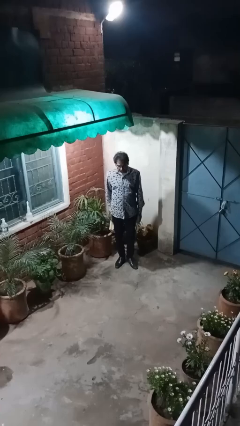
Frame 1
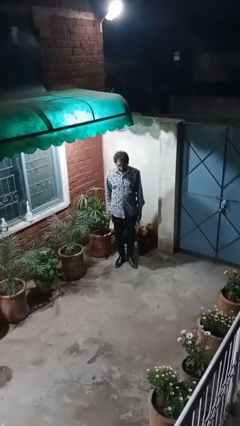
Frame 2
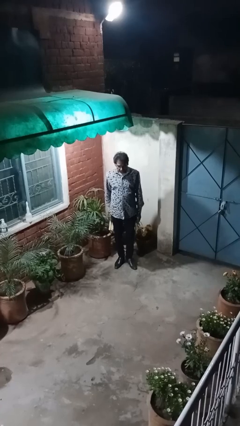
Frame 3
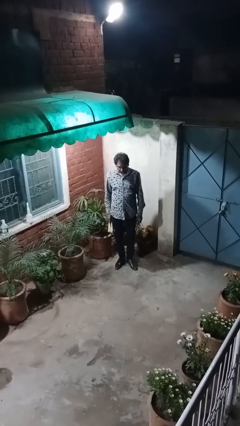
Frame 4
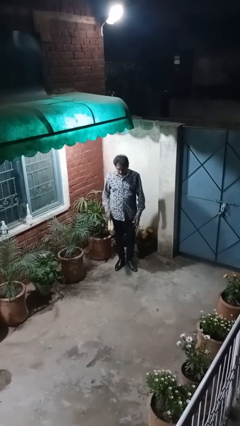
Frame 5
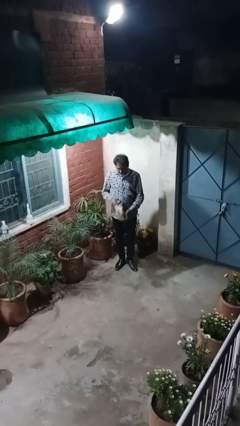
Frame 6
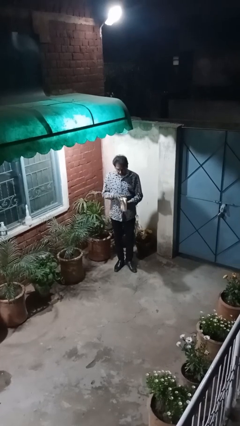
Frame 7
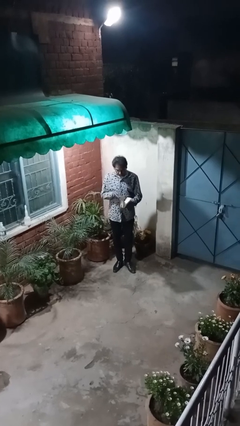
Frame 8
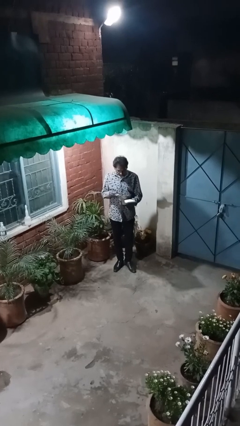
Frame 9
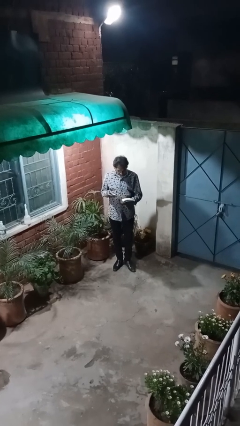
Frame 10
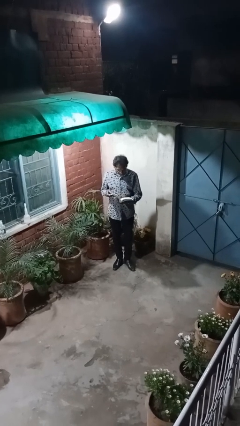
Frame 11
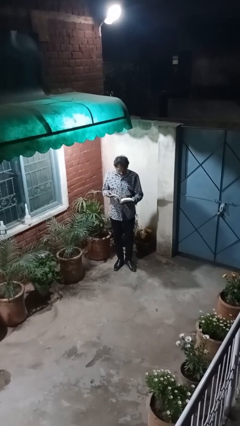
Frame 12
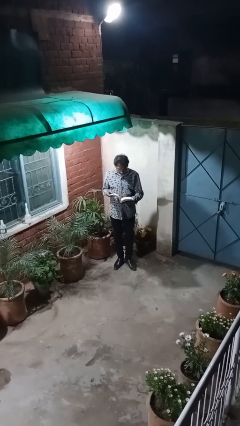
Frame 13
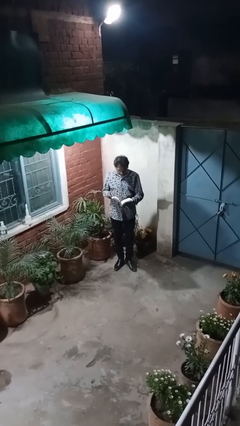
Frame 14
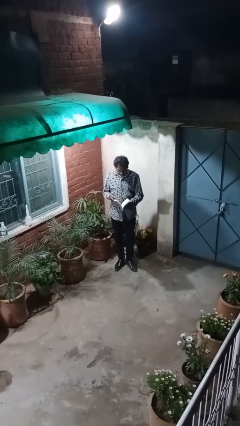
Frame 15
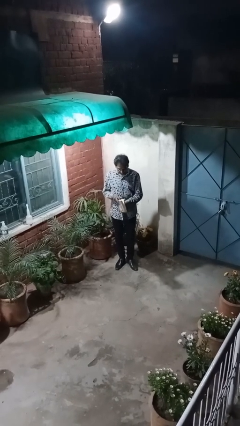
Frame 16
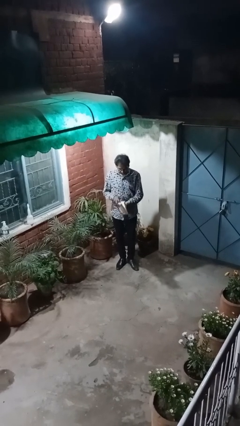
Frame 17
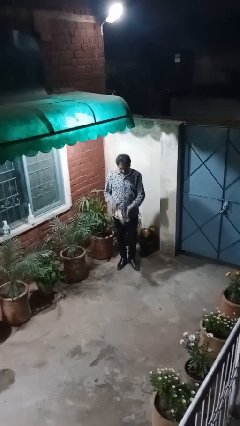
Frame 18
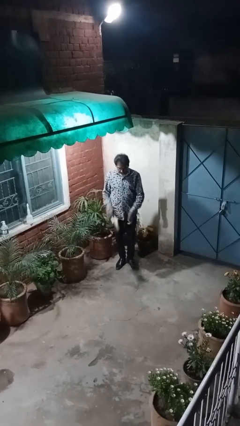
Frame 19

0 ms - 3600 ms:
person reads document

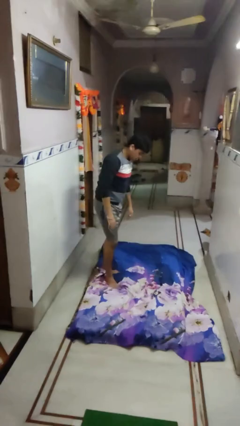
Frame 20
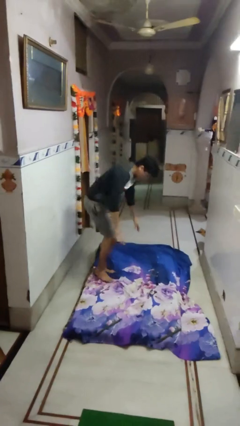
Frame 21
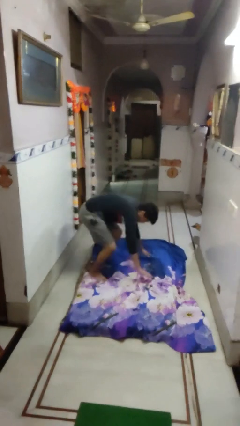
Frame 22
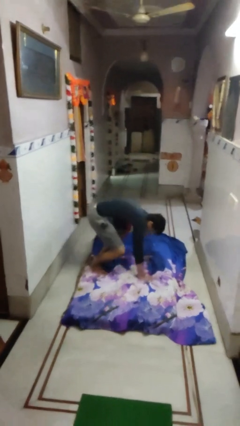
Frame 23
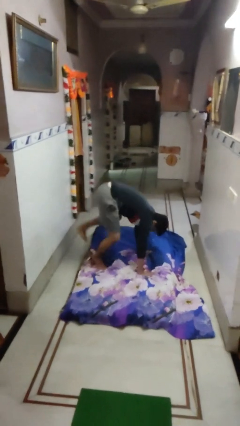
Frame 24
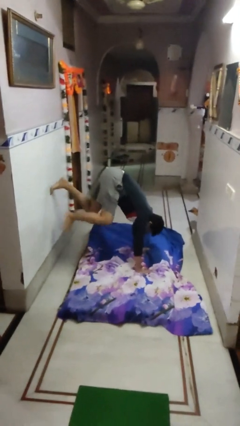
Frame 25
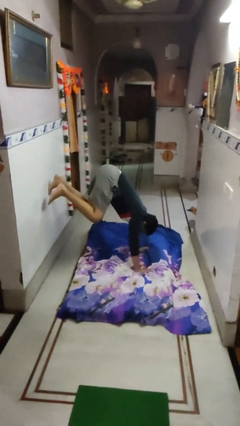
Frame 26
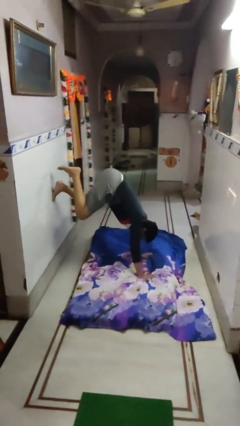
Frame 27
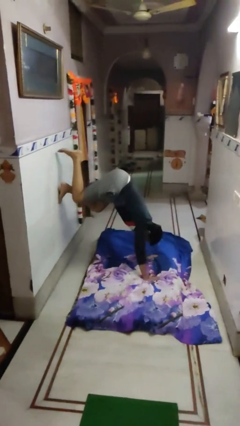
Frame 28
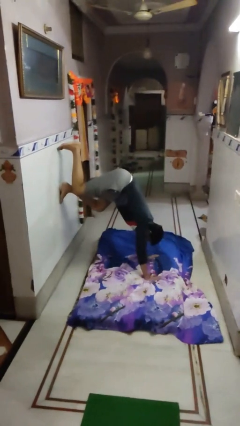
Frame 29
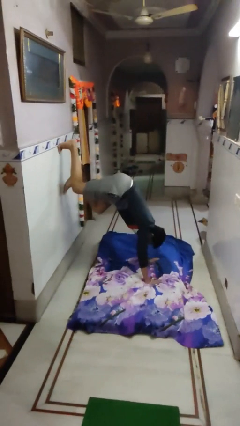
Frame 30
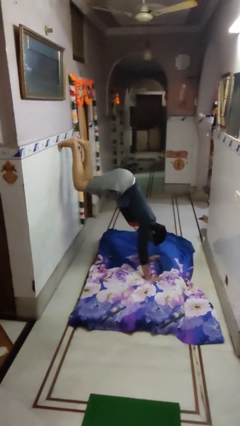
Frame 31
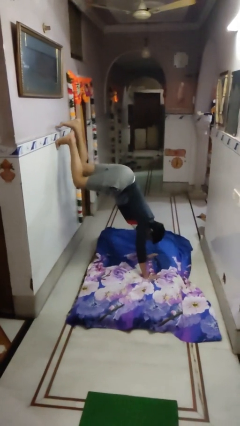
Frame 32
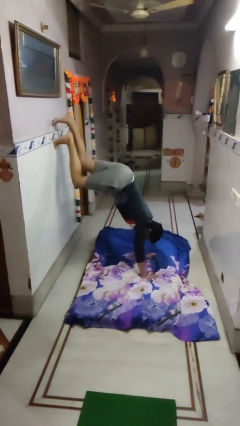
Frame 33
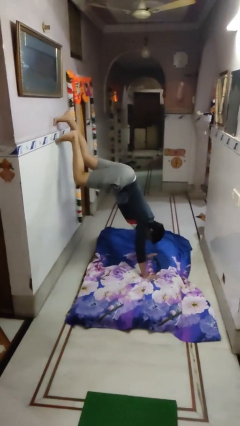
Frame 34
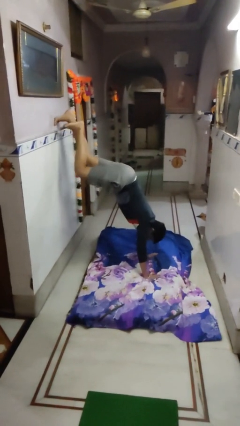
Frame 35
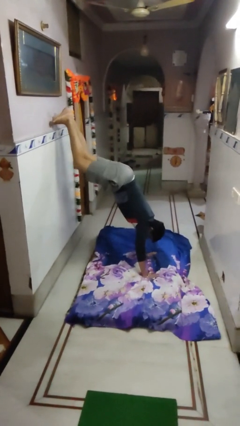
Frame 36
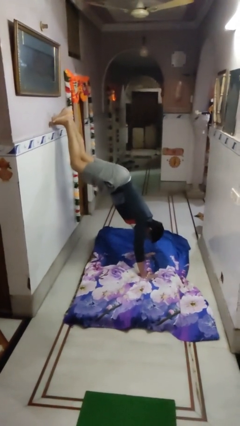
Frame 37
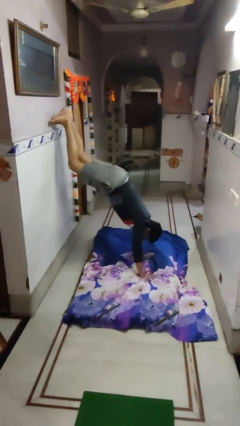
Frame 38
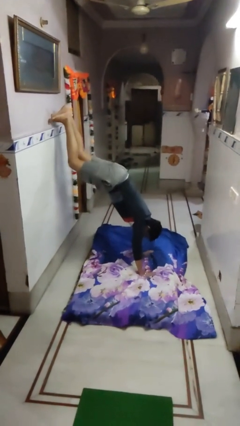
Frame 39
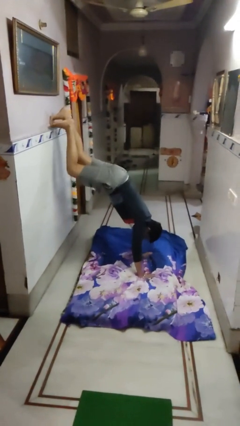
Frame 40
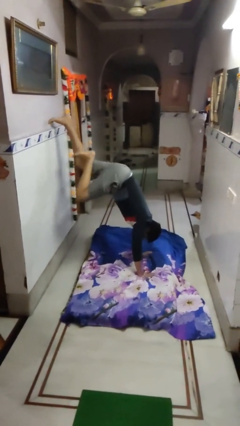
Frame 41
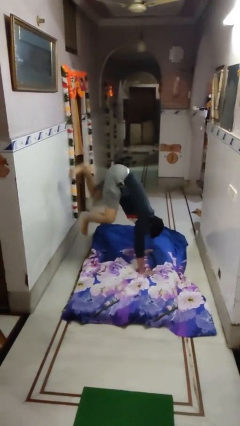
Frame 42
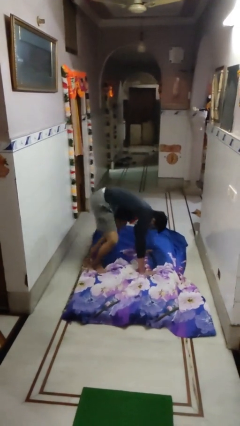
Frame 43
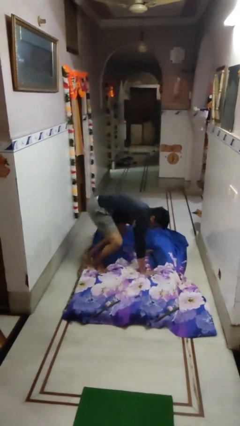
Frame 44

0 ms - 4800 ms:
person handstand

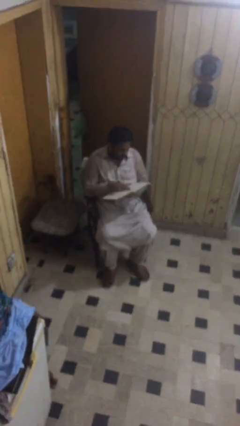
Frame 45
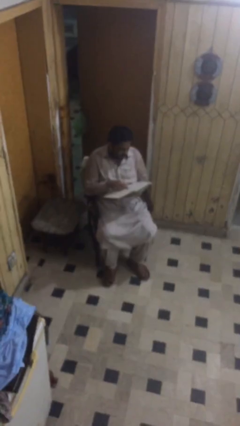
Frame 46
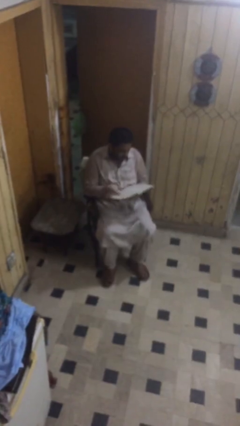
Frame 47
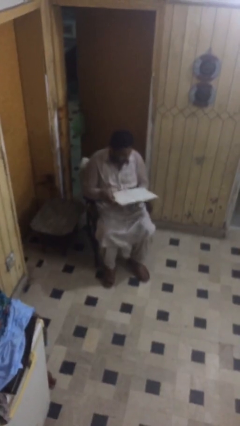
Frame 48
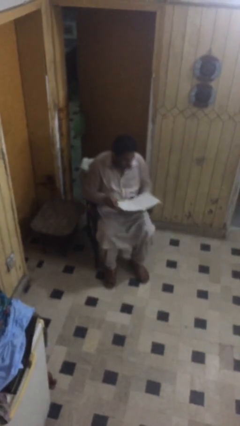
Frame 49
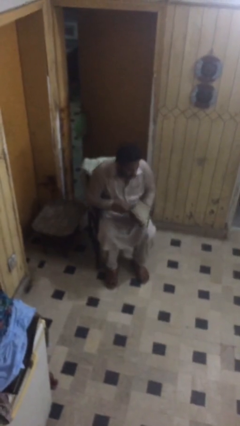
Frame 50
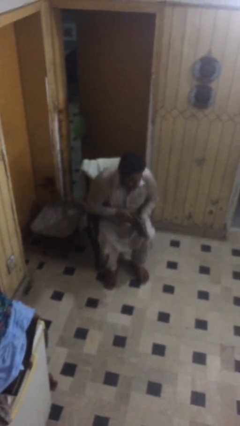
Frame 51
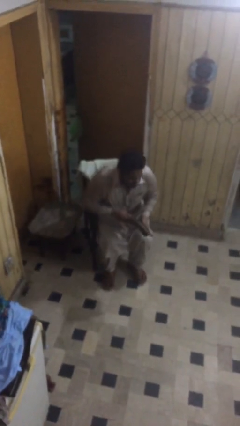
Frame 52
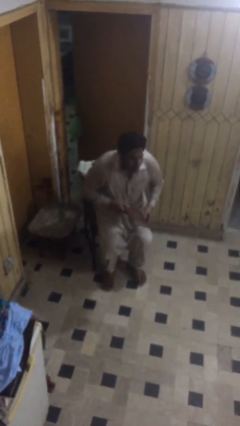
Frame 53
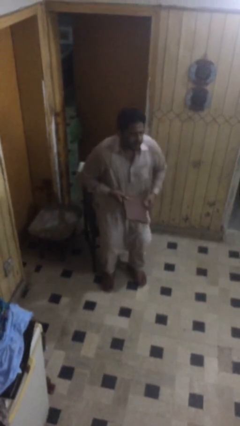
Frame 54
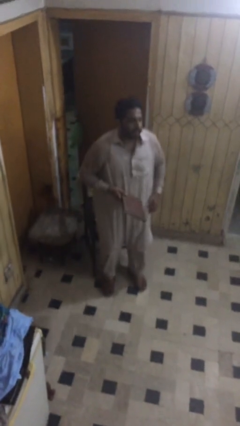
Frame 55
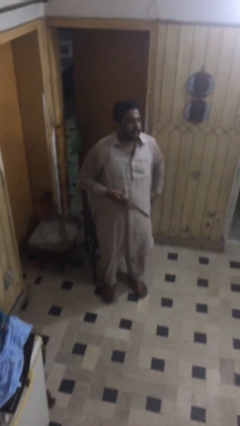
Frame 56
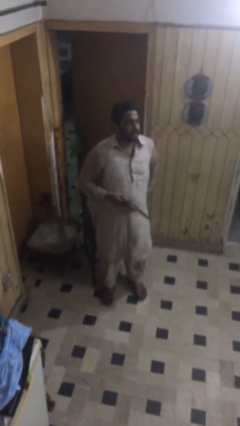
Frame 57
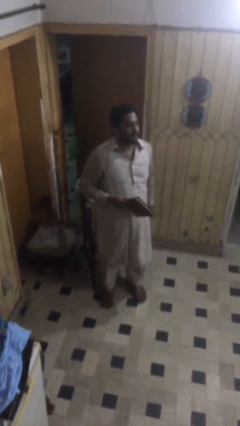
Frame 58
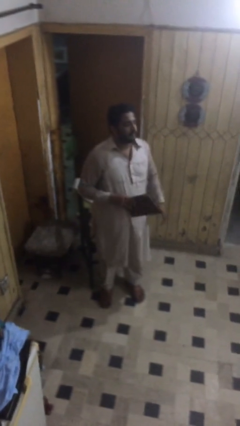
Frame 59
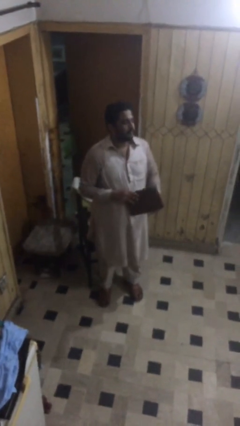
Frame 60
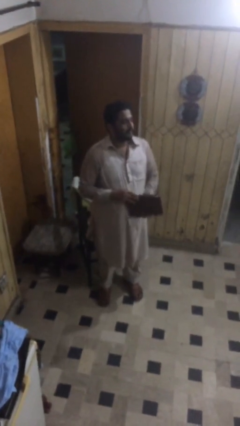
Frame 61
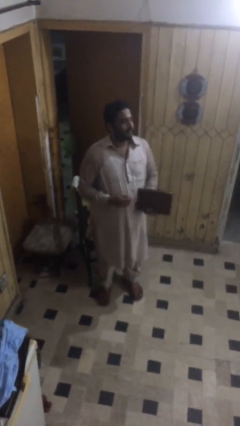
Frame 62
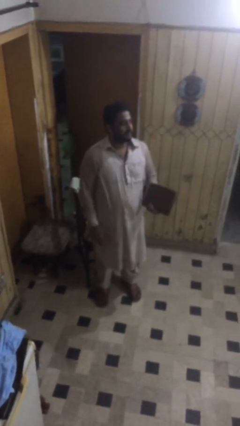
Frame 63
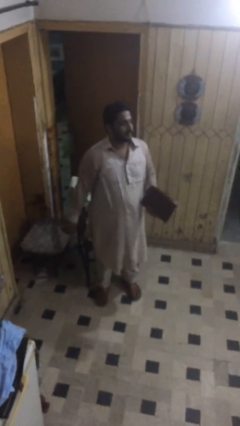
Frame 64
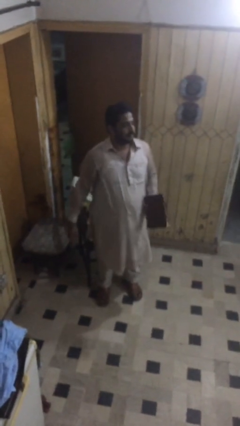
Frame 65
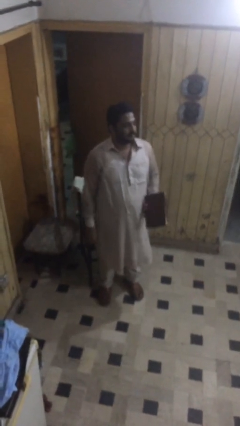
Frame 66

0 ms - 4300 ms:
person stands up

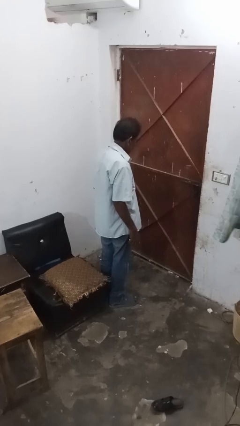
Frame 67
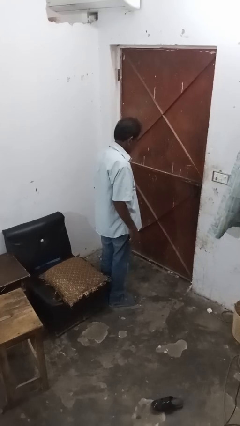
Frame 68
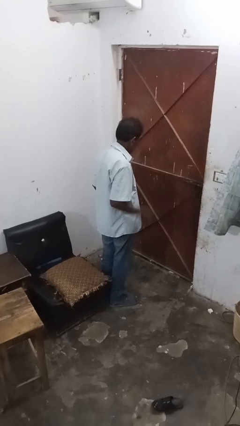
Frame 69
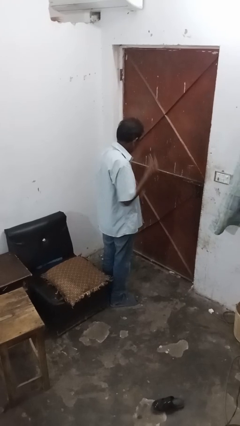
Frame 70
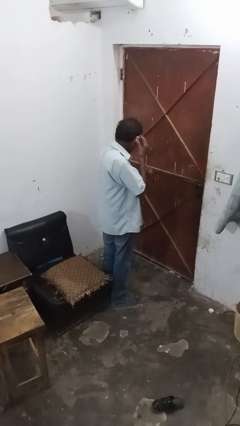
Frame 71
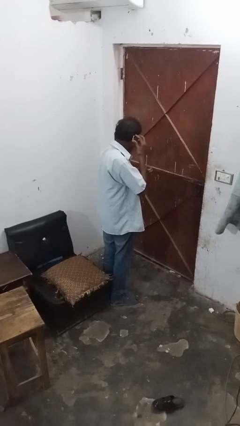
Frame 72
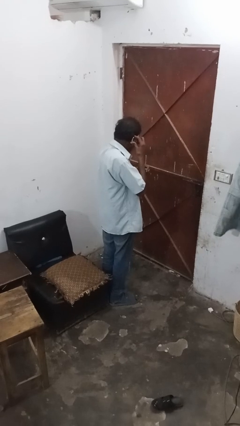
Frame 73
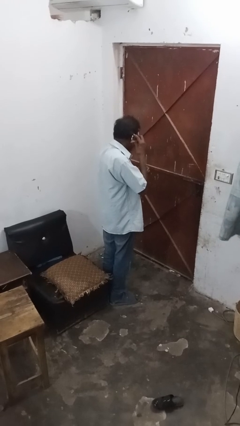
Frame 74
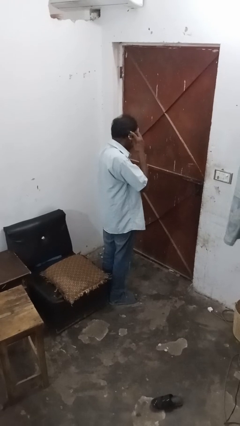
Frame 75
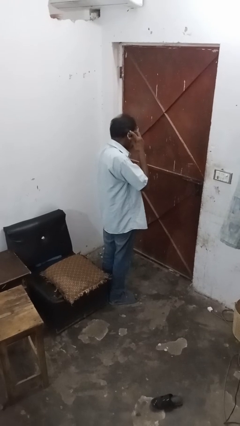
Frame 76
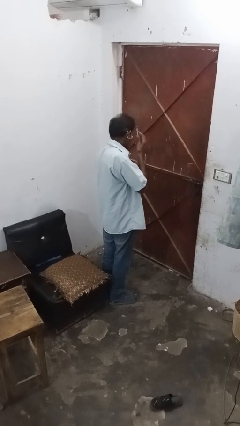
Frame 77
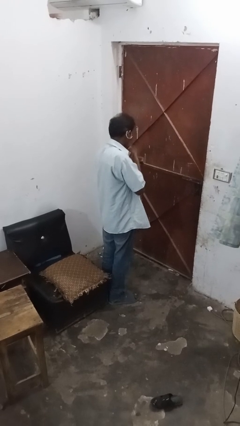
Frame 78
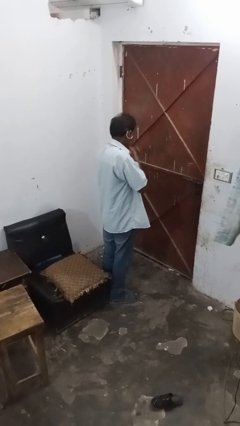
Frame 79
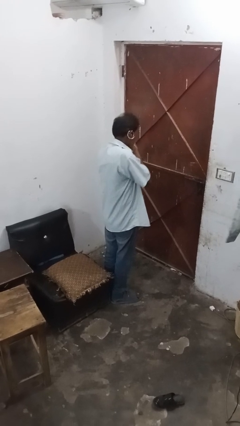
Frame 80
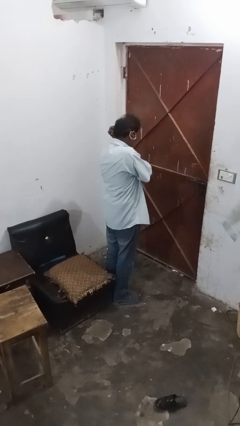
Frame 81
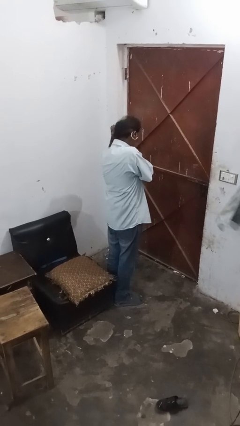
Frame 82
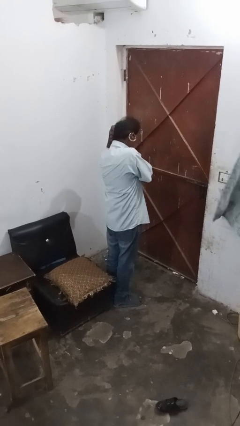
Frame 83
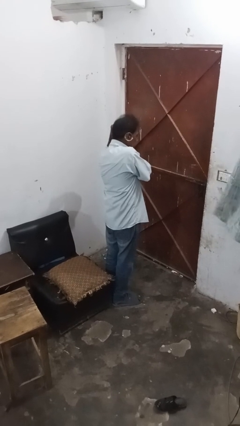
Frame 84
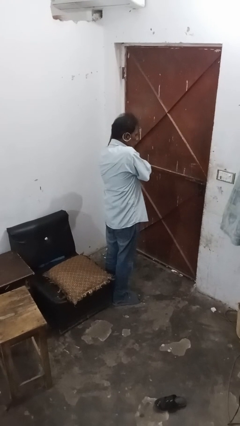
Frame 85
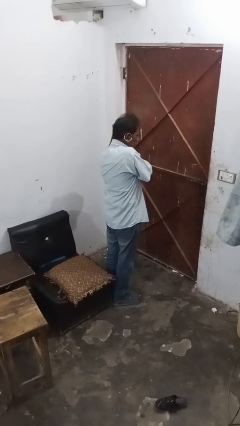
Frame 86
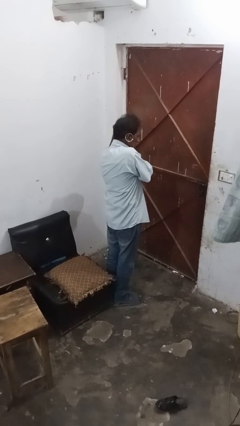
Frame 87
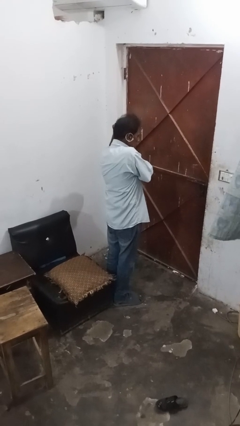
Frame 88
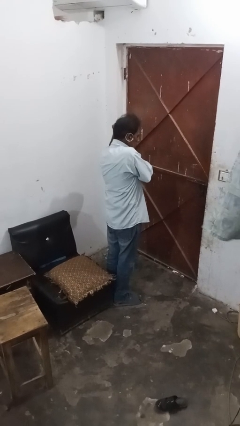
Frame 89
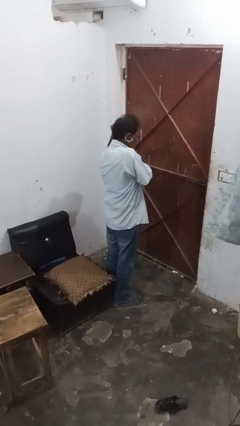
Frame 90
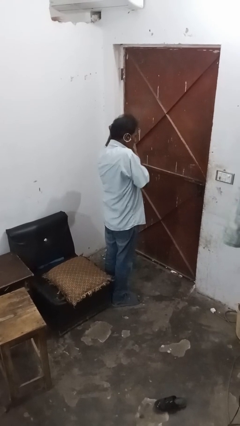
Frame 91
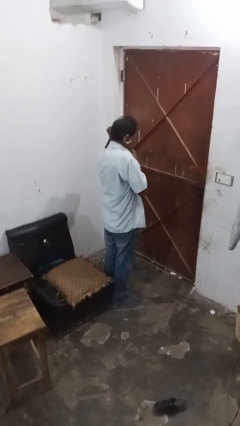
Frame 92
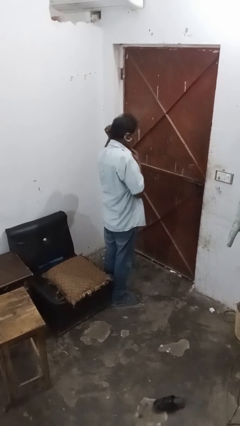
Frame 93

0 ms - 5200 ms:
person puts on earrings
